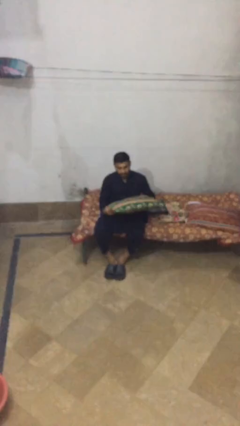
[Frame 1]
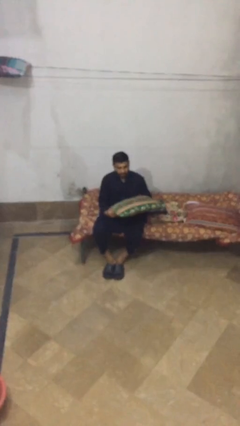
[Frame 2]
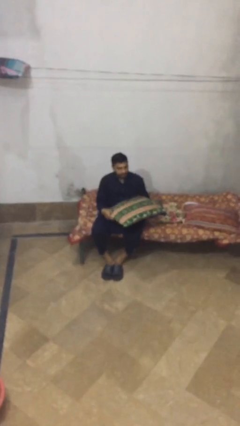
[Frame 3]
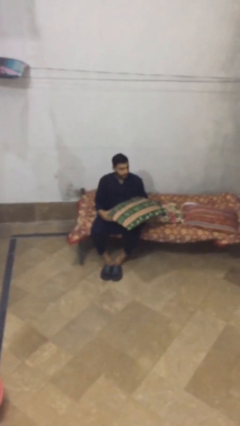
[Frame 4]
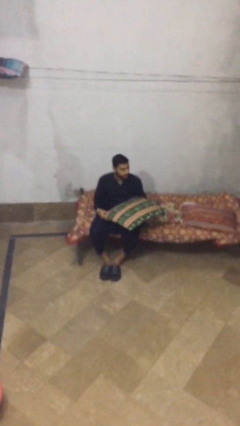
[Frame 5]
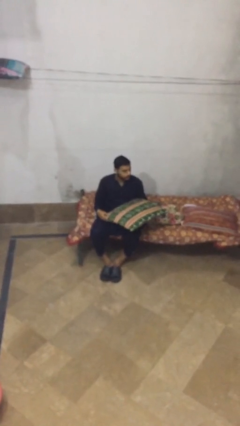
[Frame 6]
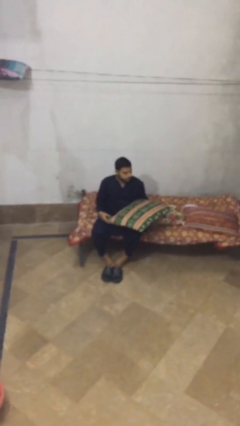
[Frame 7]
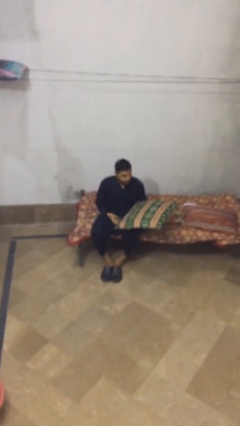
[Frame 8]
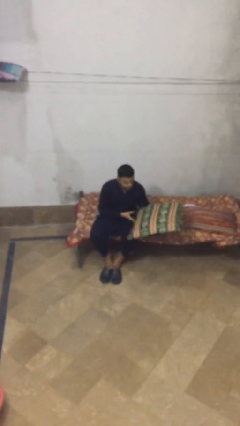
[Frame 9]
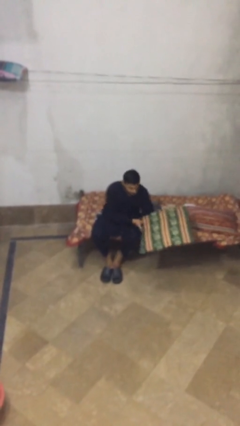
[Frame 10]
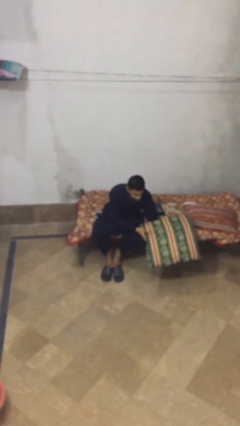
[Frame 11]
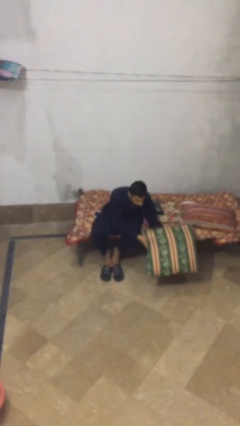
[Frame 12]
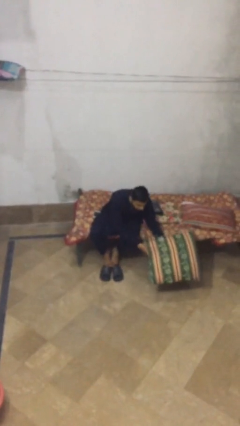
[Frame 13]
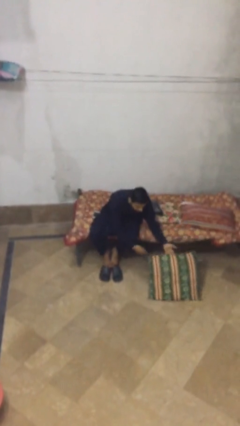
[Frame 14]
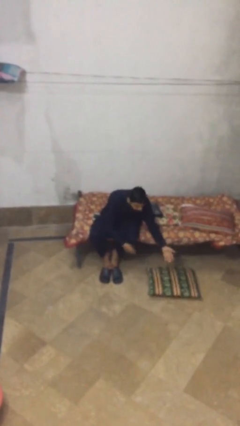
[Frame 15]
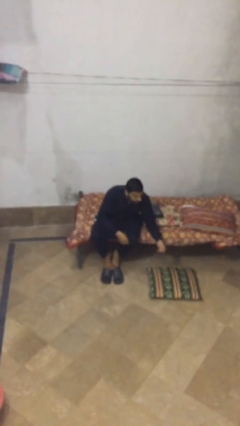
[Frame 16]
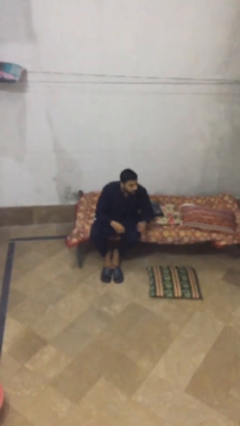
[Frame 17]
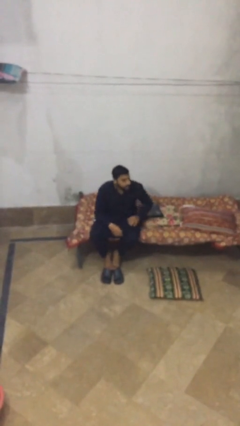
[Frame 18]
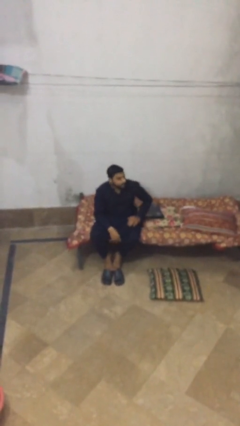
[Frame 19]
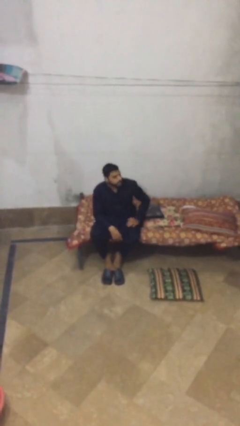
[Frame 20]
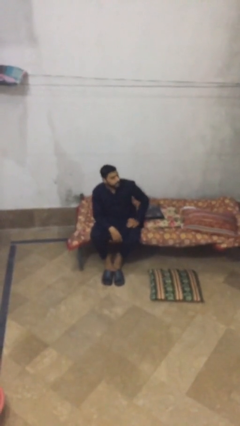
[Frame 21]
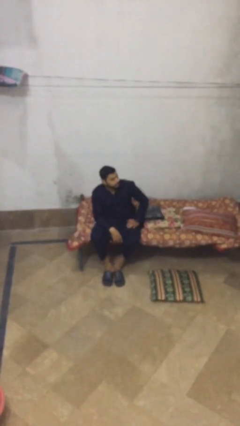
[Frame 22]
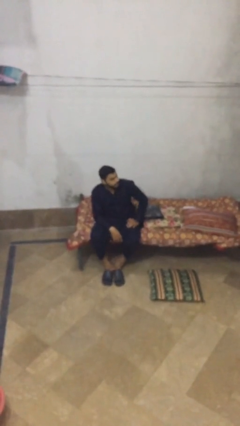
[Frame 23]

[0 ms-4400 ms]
person puts down object on floor

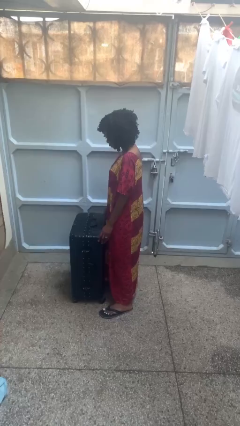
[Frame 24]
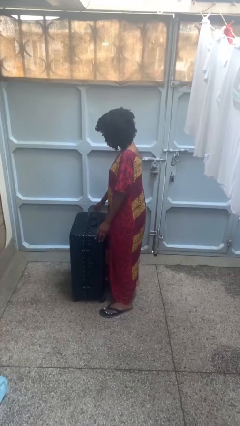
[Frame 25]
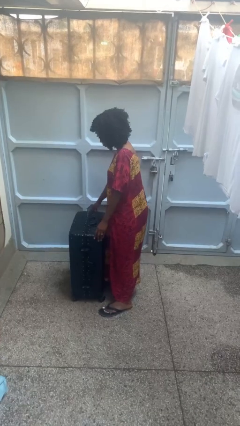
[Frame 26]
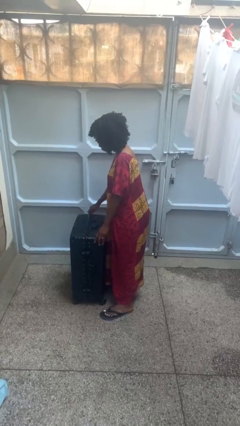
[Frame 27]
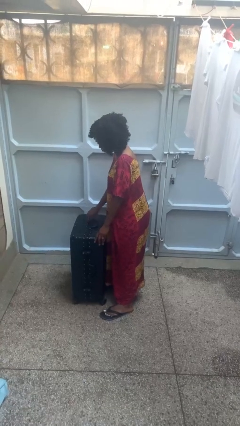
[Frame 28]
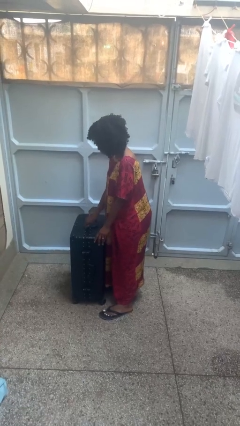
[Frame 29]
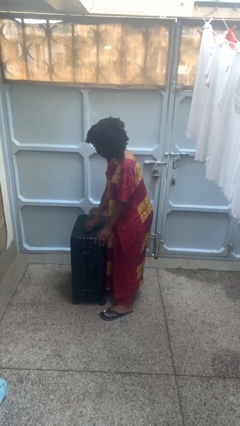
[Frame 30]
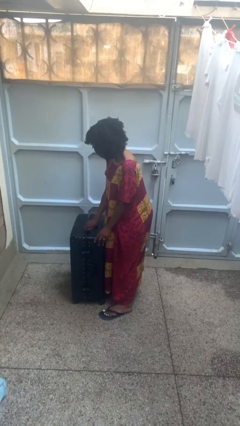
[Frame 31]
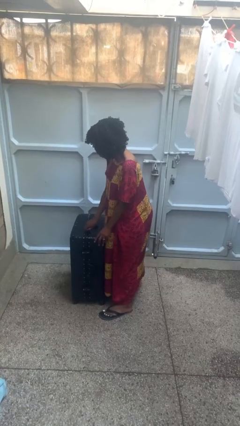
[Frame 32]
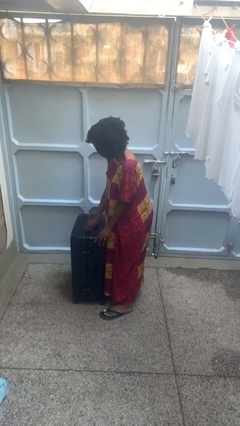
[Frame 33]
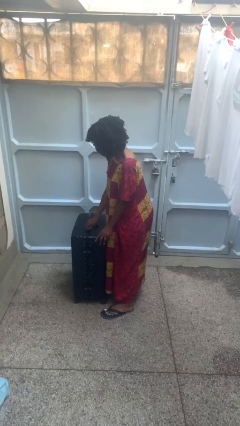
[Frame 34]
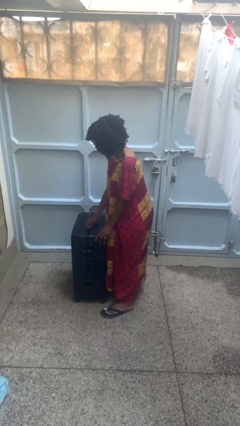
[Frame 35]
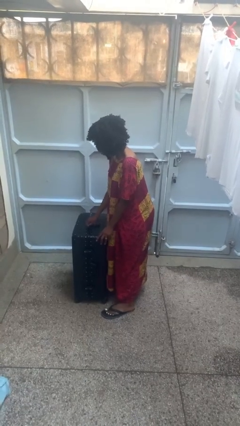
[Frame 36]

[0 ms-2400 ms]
person opens suitcase

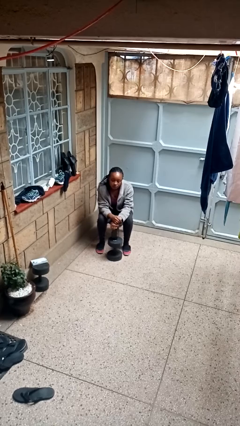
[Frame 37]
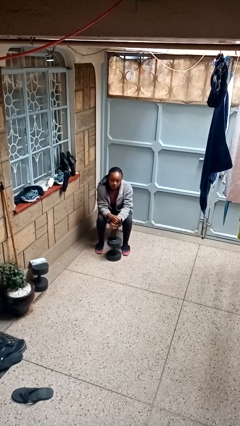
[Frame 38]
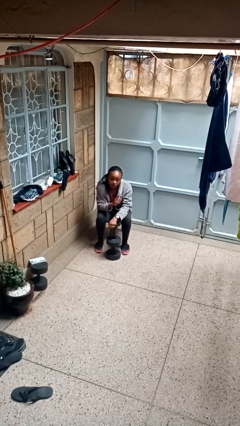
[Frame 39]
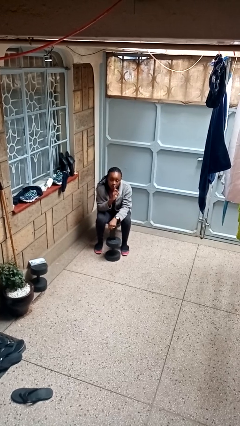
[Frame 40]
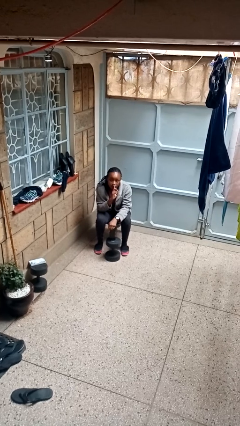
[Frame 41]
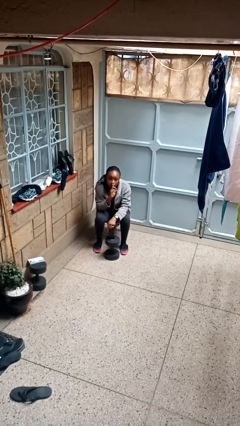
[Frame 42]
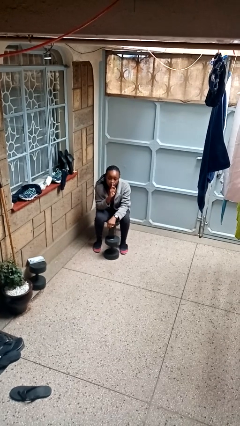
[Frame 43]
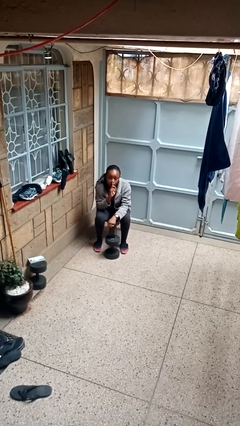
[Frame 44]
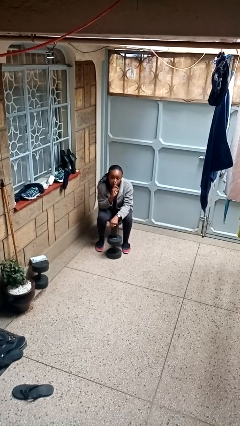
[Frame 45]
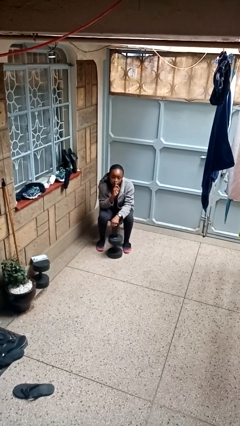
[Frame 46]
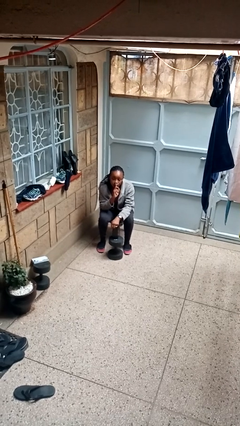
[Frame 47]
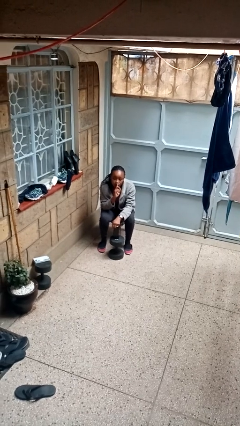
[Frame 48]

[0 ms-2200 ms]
person gestures be quiet

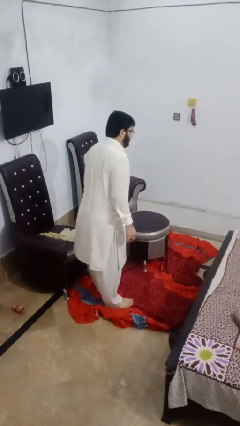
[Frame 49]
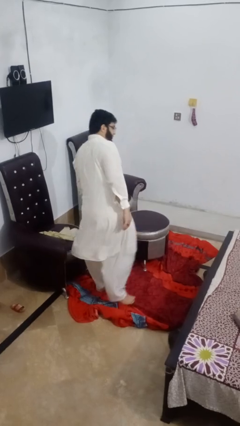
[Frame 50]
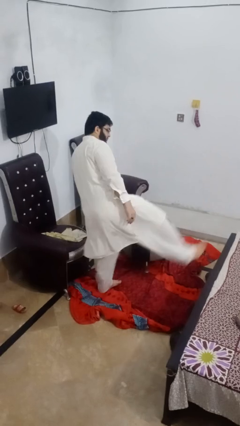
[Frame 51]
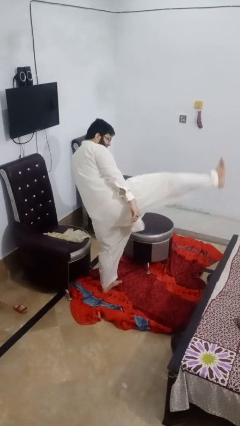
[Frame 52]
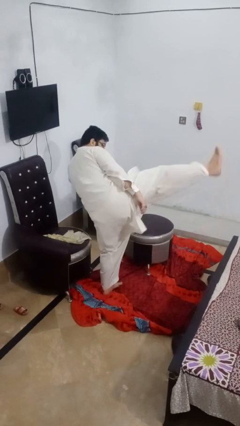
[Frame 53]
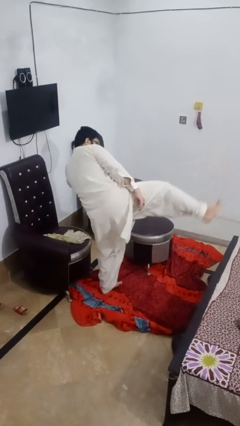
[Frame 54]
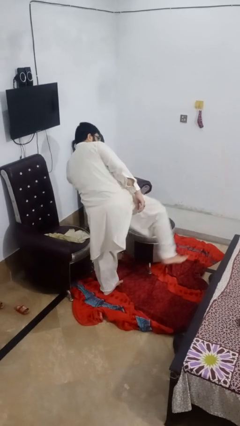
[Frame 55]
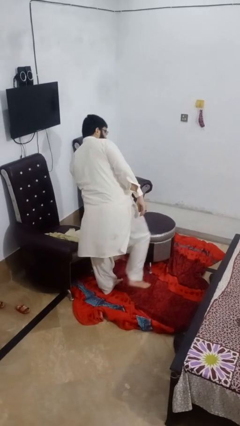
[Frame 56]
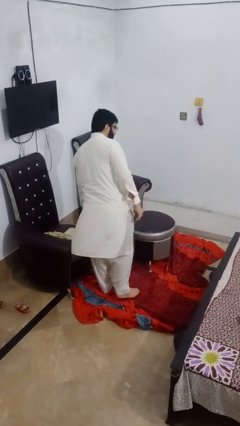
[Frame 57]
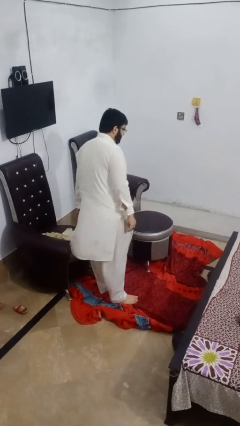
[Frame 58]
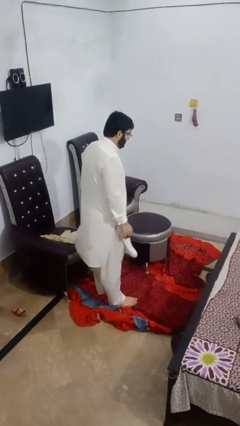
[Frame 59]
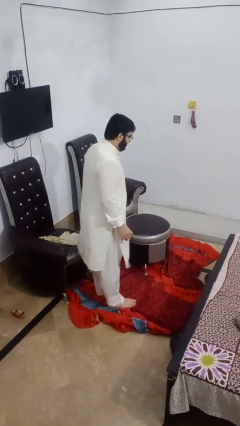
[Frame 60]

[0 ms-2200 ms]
person karate kicks

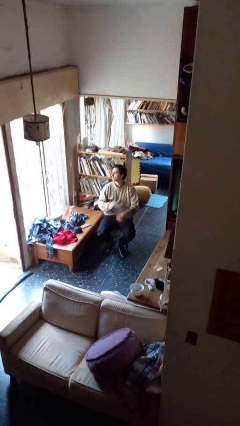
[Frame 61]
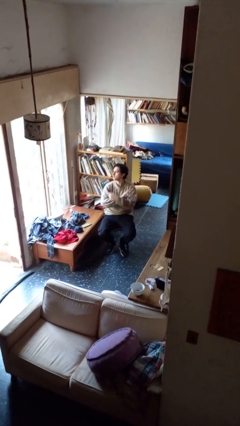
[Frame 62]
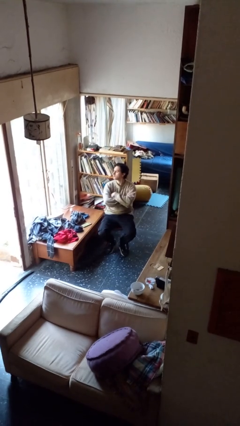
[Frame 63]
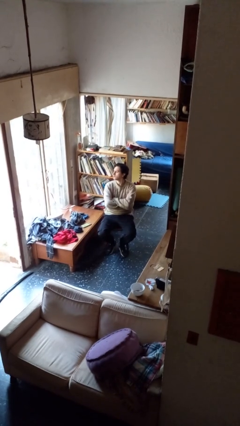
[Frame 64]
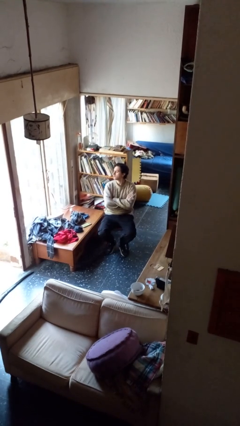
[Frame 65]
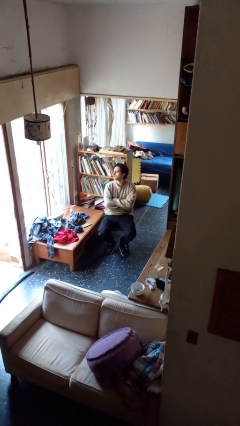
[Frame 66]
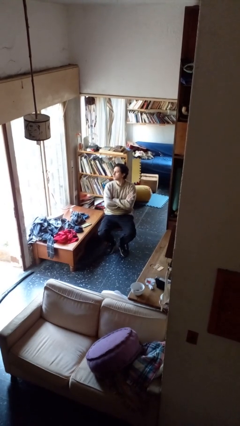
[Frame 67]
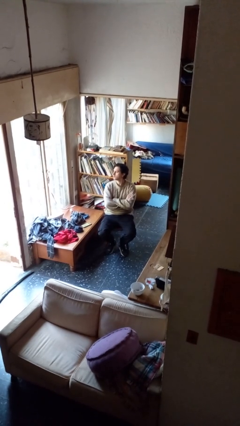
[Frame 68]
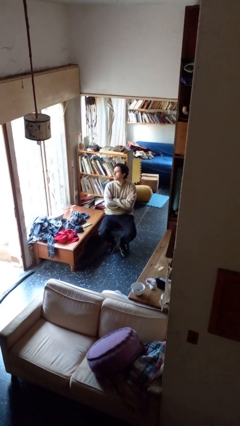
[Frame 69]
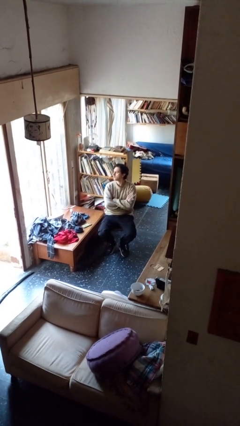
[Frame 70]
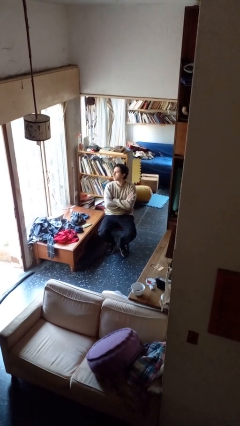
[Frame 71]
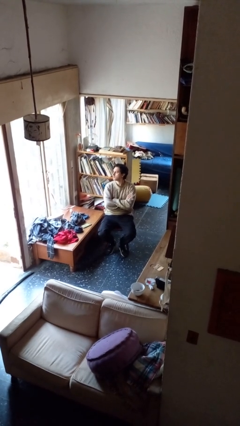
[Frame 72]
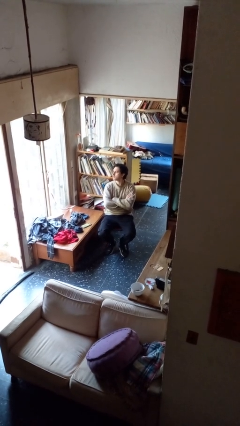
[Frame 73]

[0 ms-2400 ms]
person crosses arms

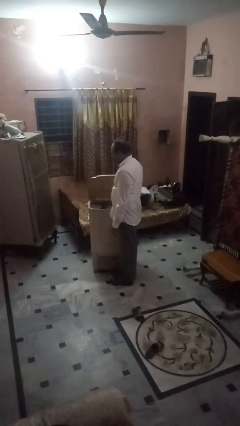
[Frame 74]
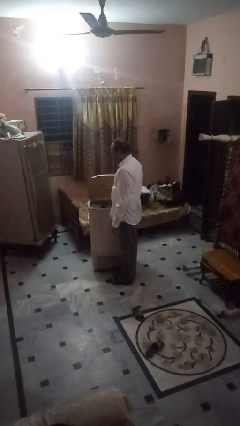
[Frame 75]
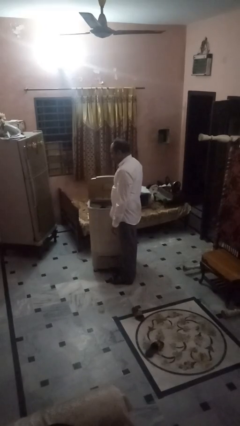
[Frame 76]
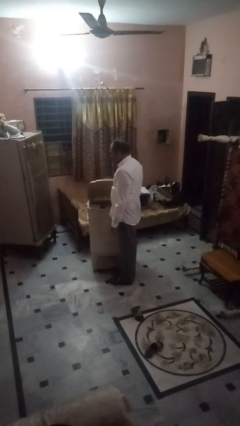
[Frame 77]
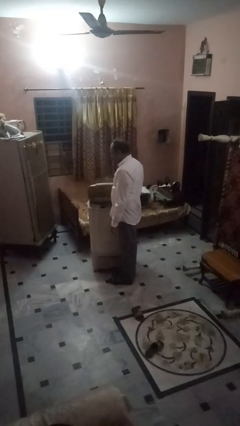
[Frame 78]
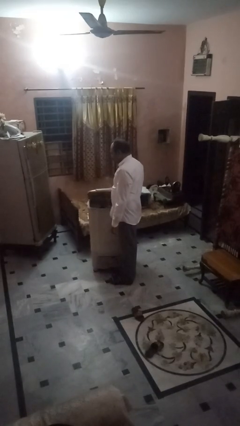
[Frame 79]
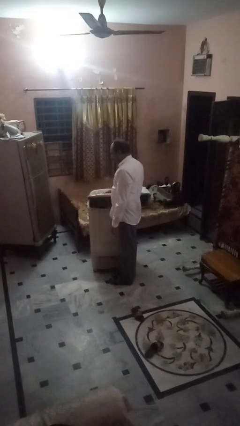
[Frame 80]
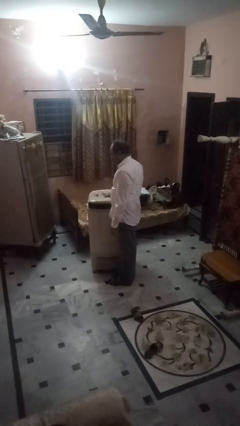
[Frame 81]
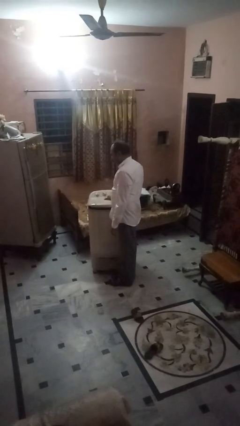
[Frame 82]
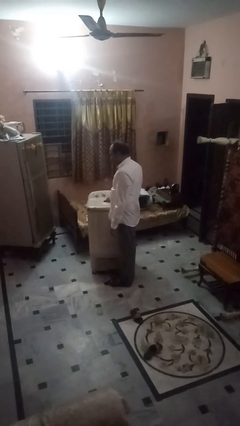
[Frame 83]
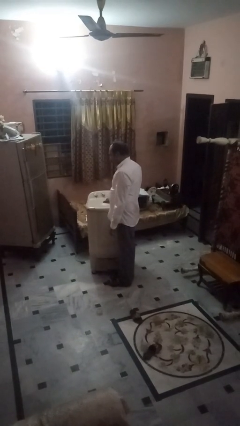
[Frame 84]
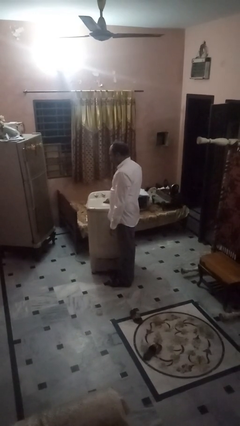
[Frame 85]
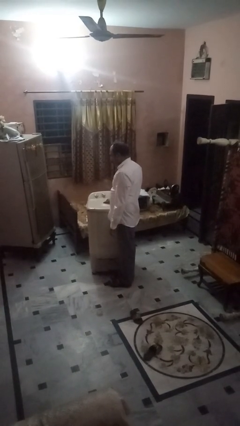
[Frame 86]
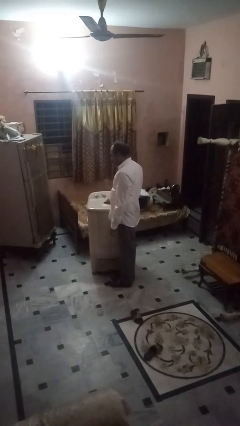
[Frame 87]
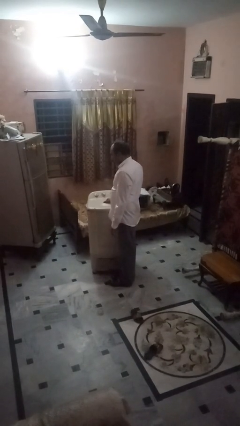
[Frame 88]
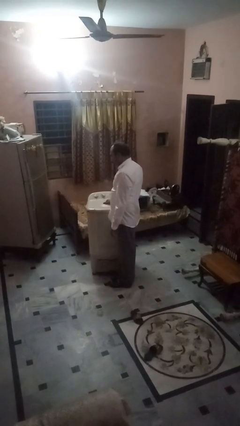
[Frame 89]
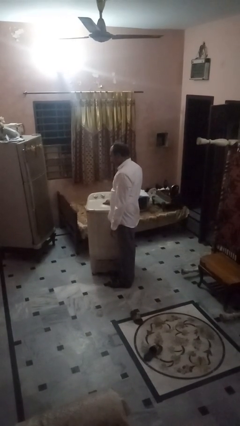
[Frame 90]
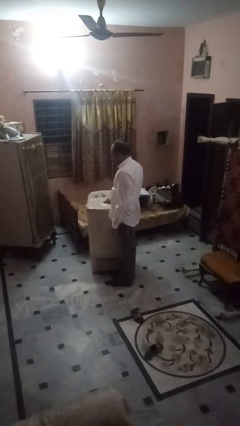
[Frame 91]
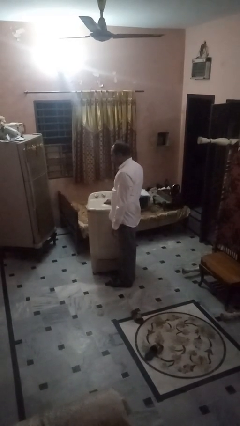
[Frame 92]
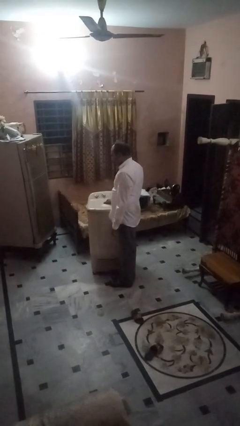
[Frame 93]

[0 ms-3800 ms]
person closes clothes washer
